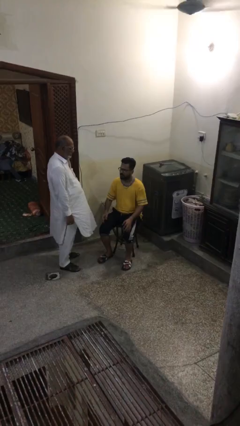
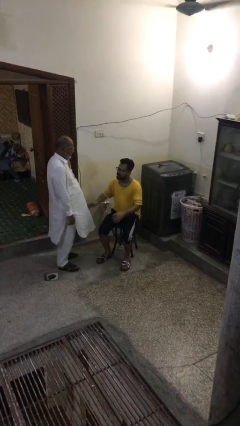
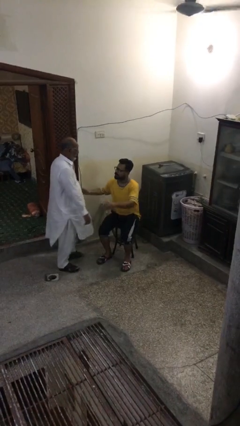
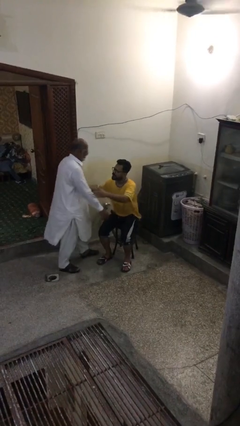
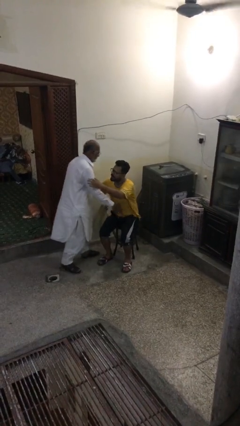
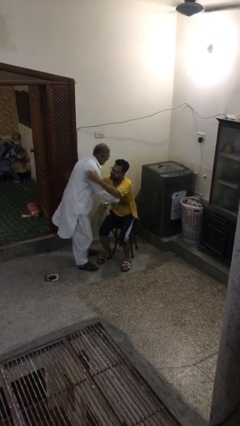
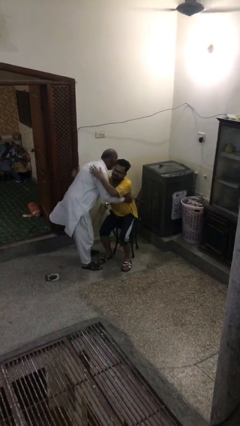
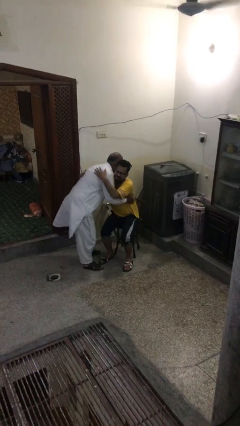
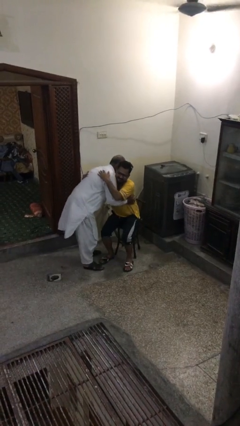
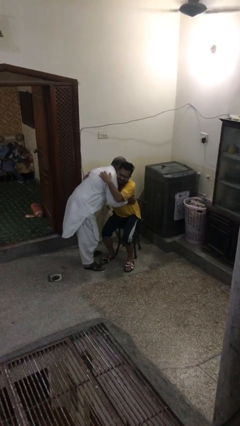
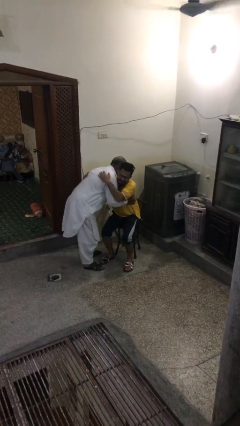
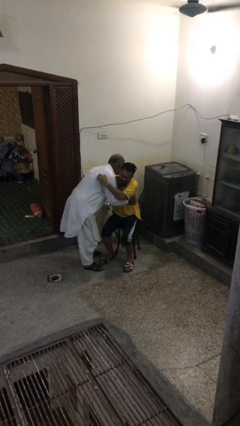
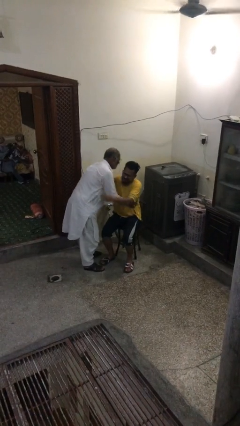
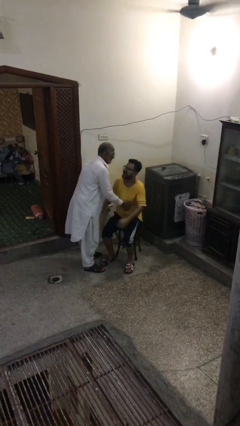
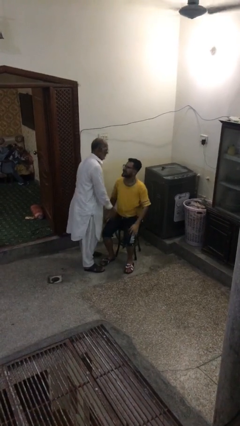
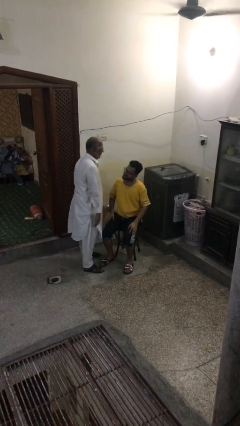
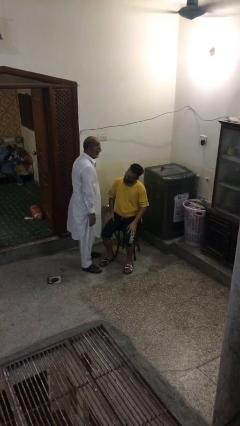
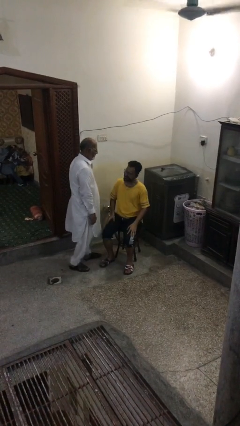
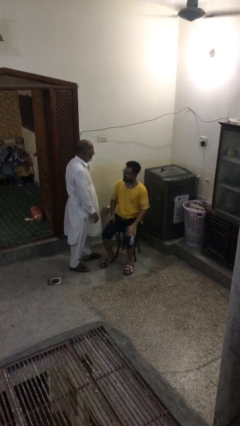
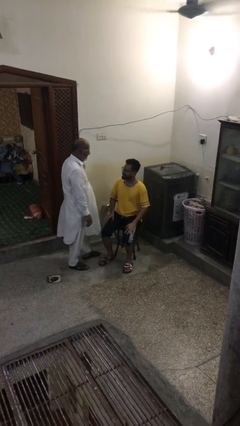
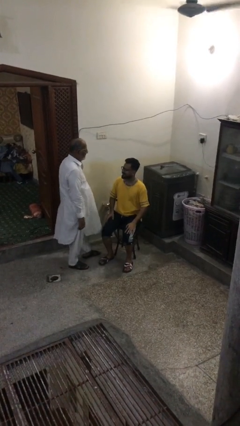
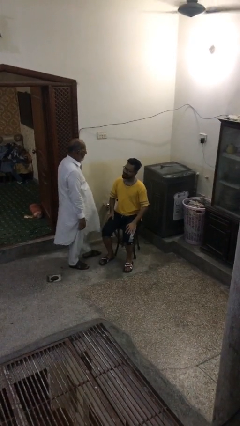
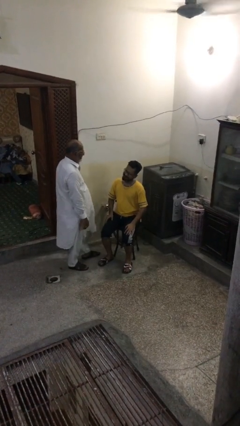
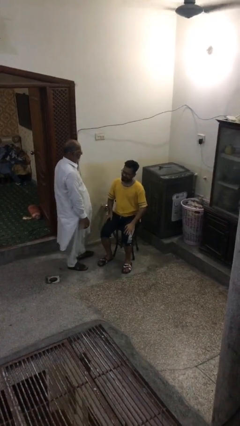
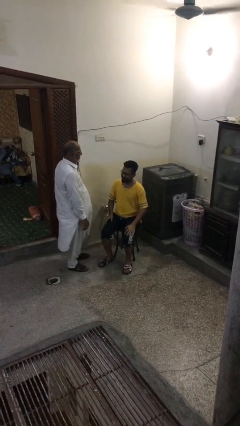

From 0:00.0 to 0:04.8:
person embraces person

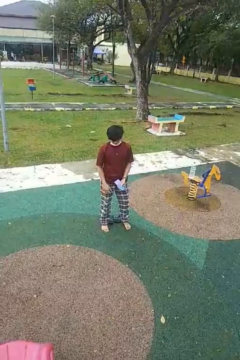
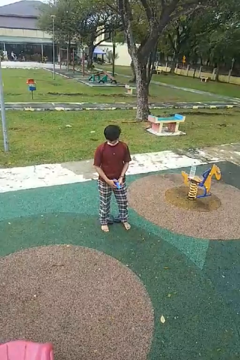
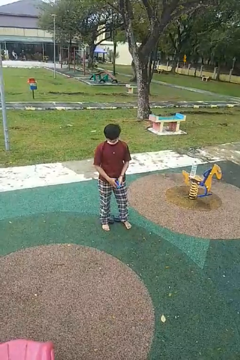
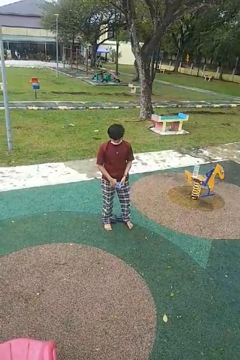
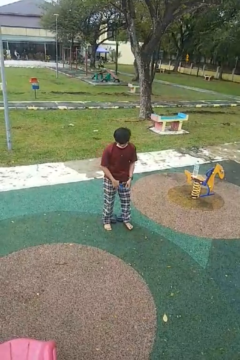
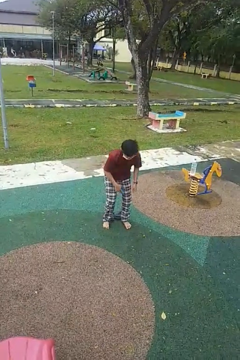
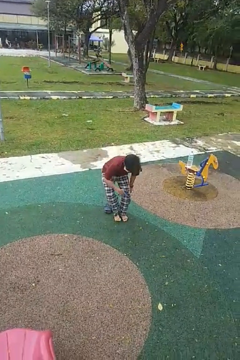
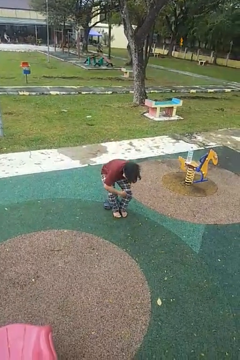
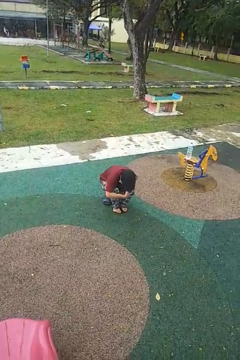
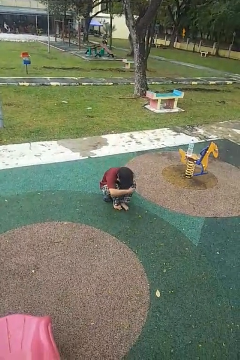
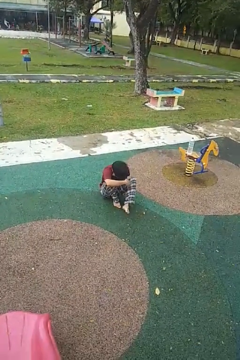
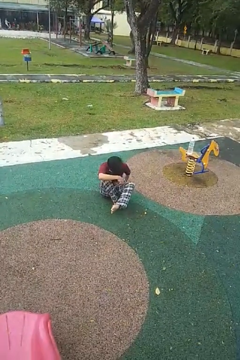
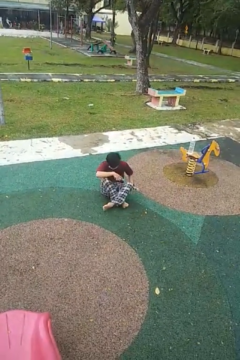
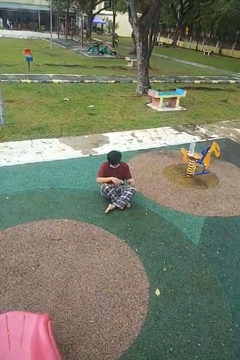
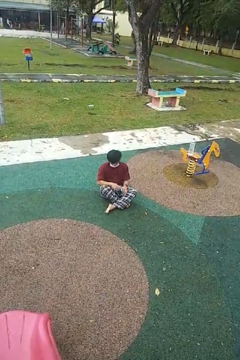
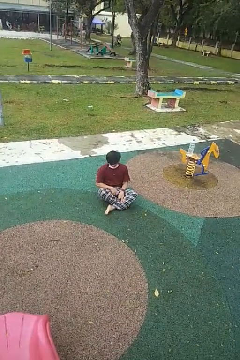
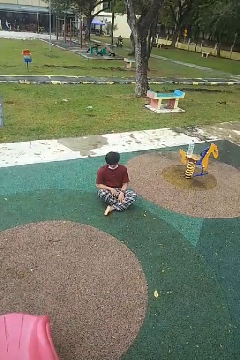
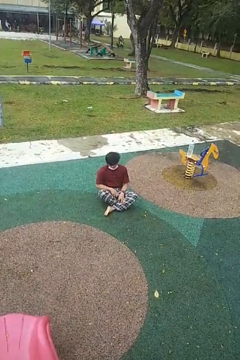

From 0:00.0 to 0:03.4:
person sits crisscross

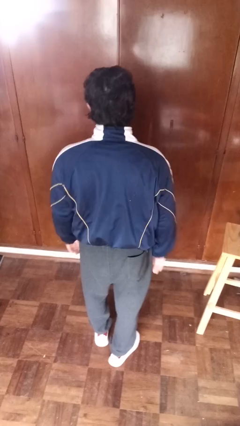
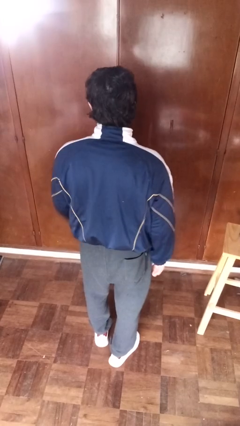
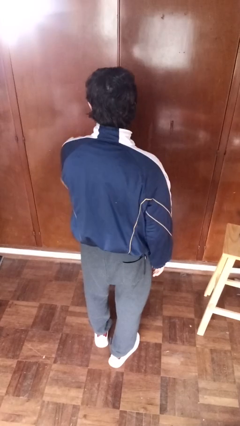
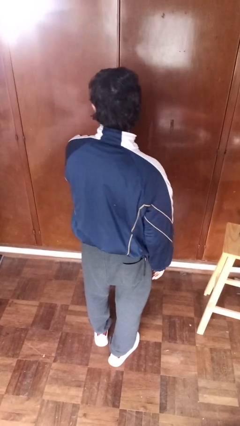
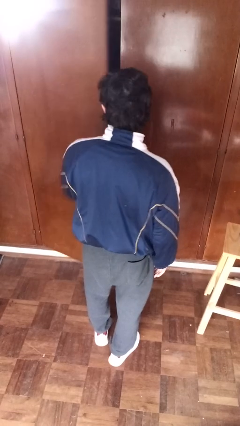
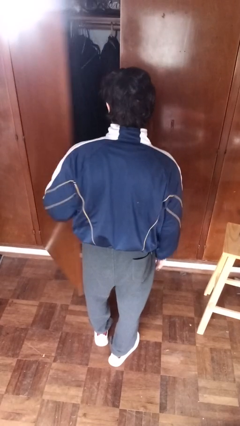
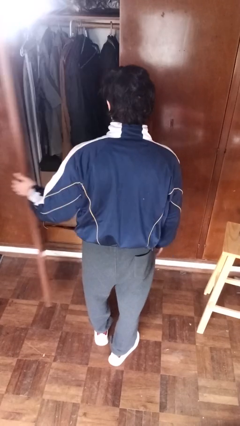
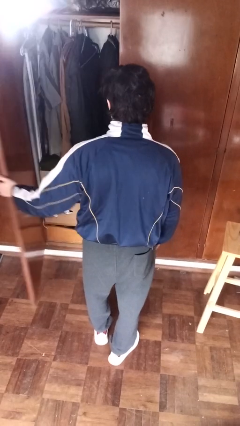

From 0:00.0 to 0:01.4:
person opens closet door

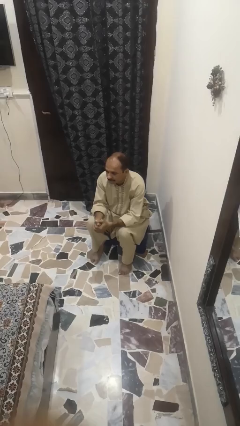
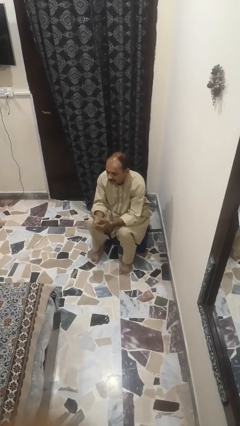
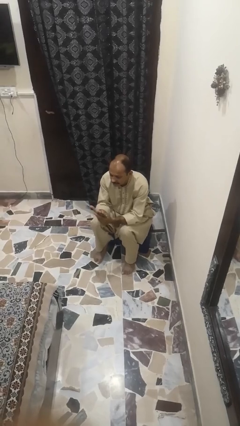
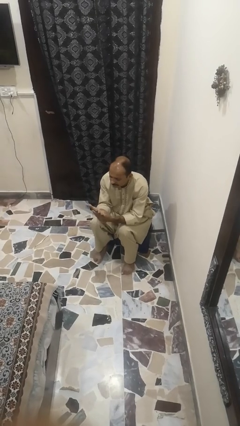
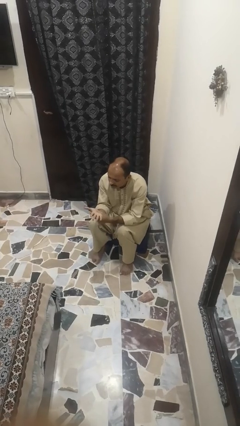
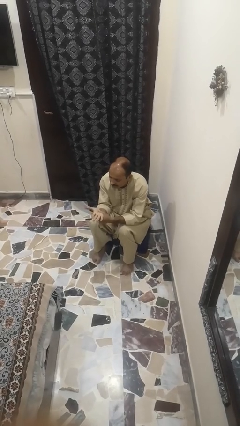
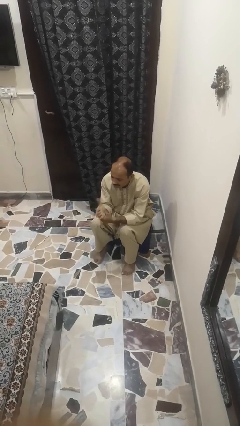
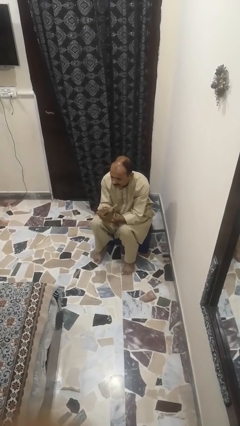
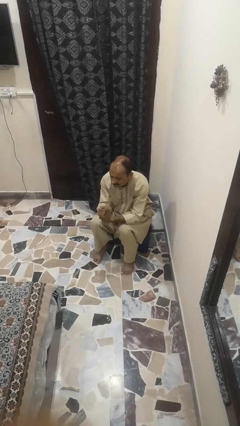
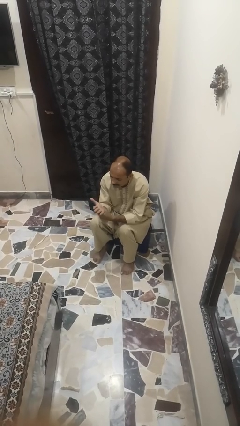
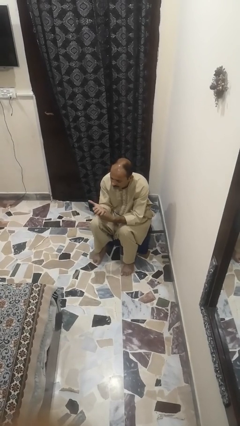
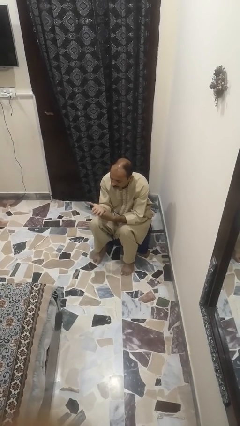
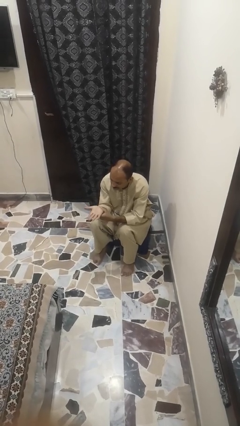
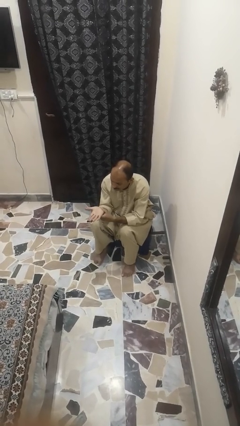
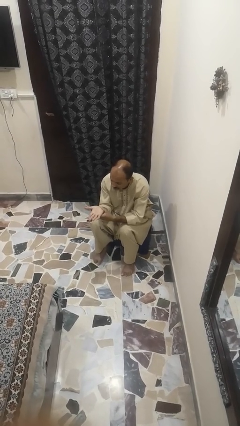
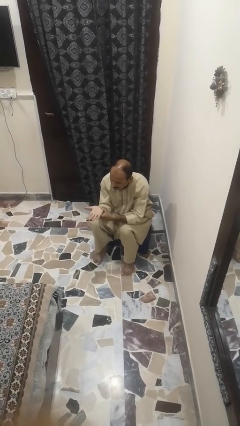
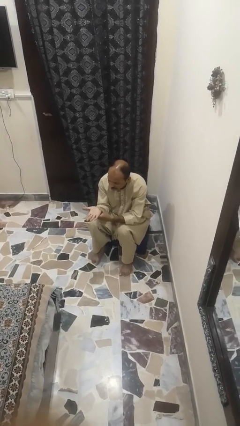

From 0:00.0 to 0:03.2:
person looks at hands in lap

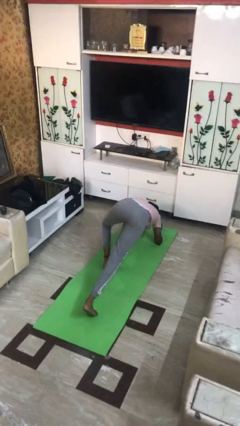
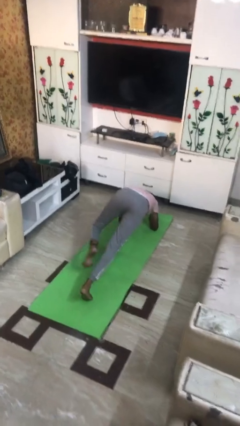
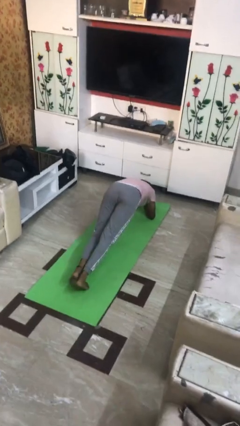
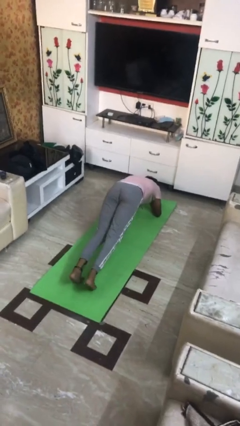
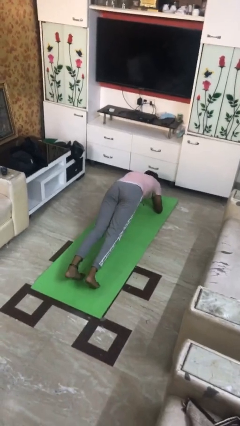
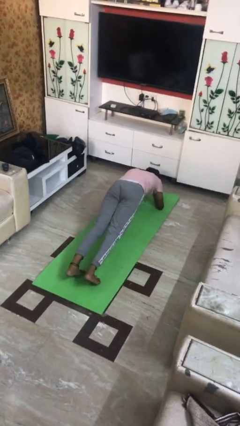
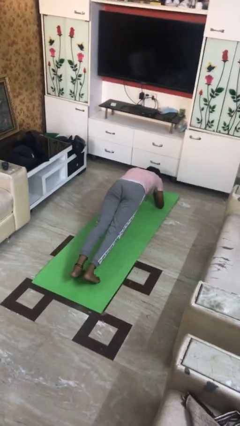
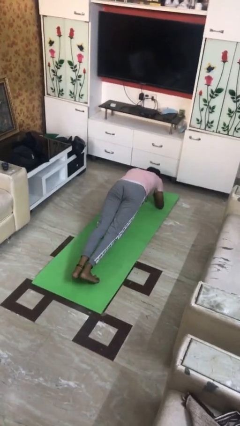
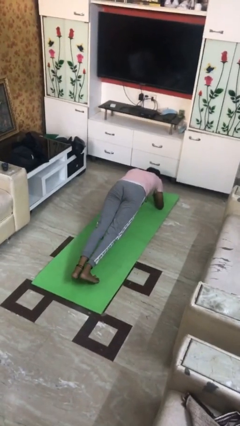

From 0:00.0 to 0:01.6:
person exercises with plank

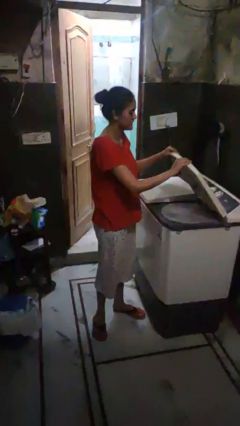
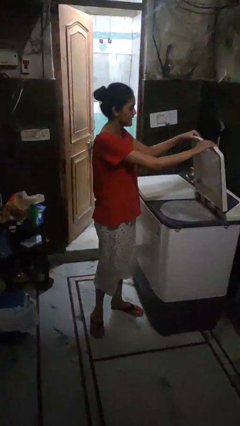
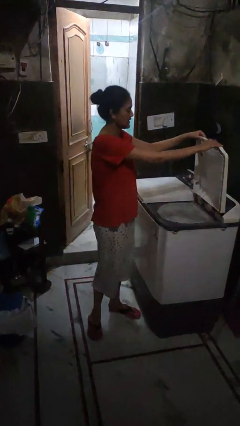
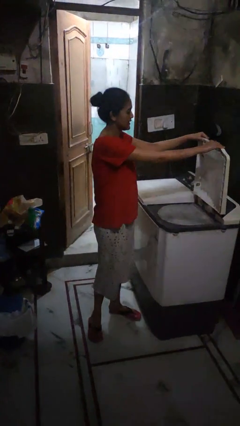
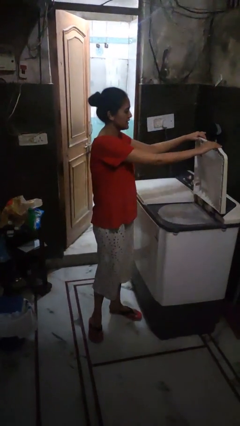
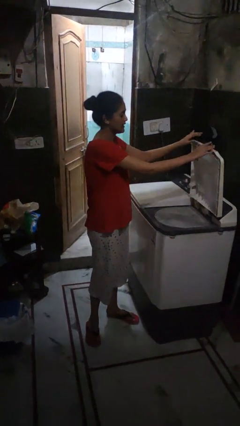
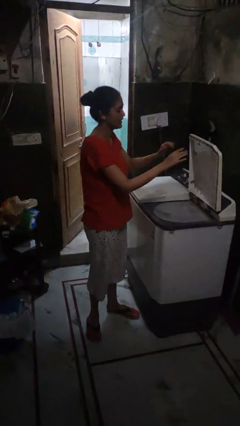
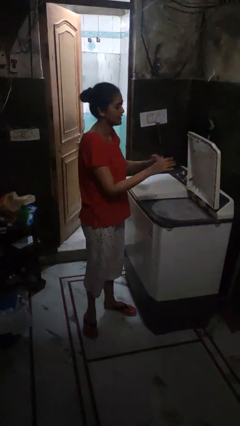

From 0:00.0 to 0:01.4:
person opens clothes washer

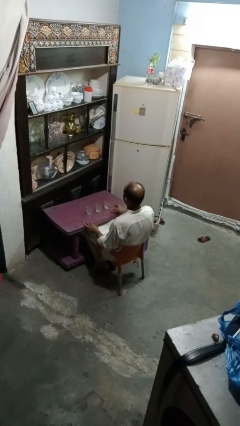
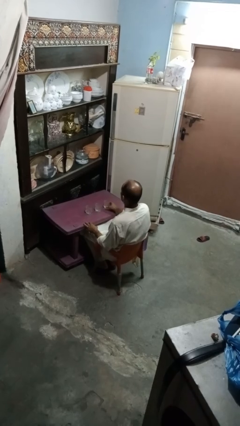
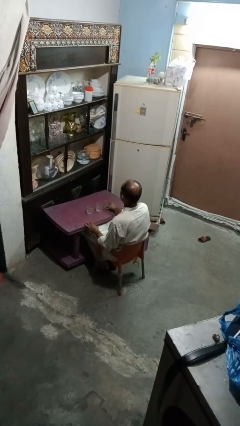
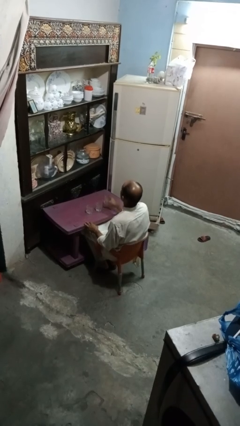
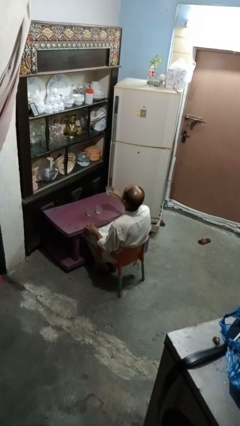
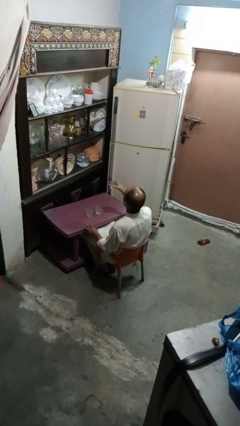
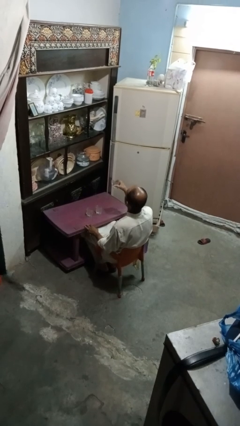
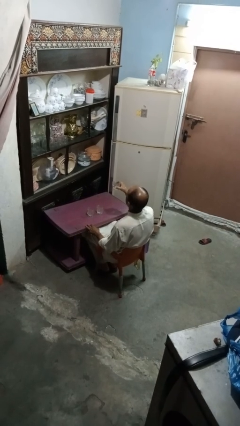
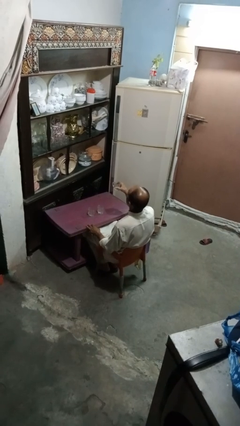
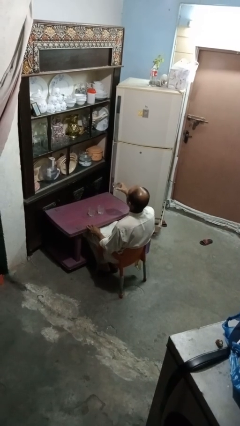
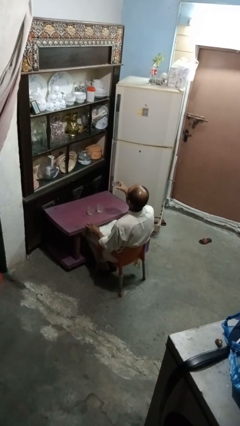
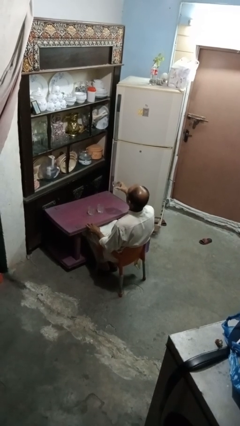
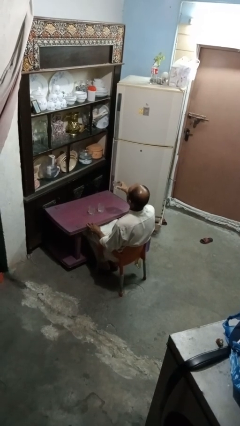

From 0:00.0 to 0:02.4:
person picks up object from table
